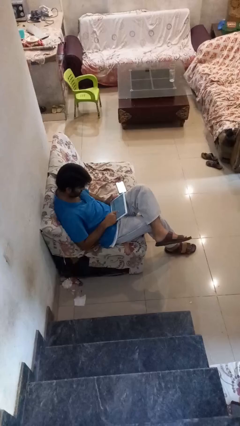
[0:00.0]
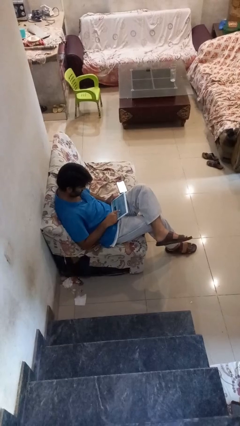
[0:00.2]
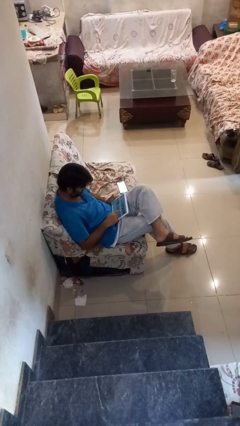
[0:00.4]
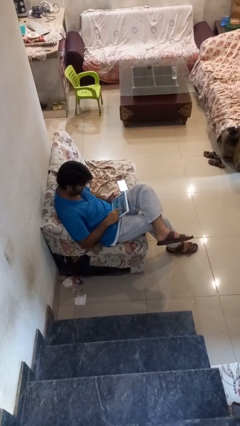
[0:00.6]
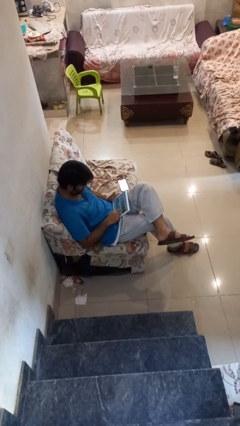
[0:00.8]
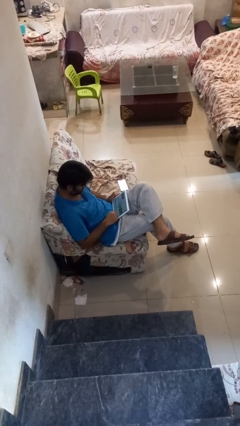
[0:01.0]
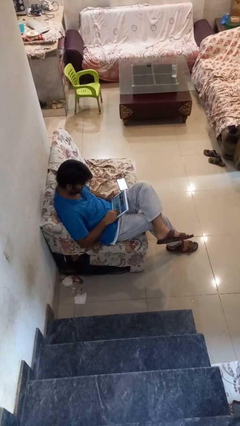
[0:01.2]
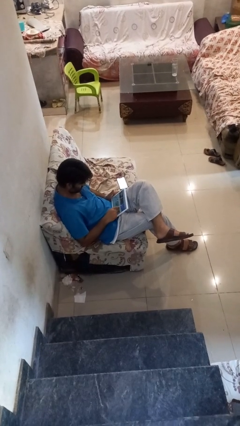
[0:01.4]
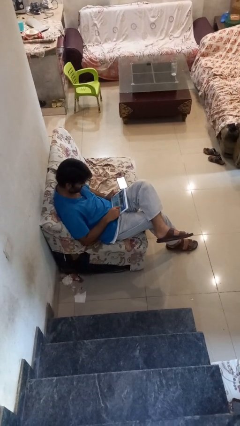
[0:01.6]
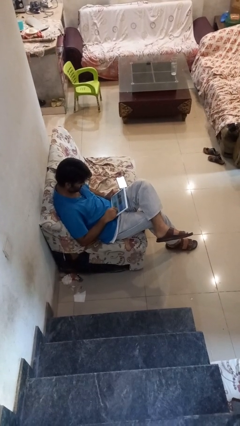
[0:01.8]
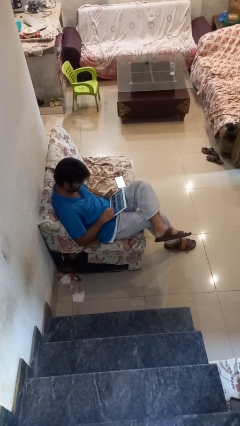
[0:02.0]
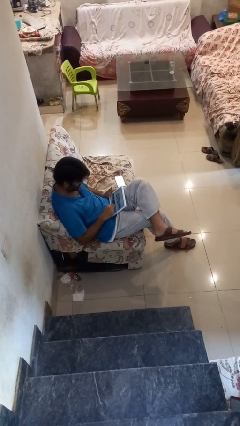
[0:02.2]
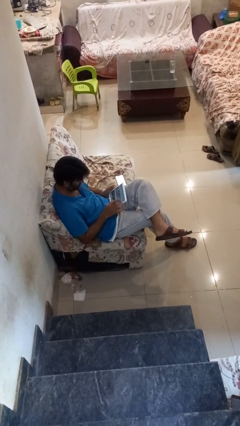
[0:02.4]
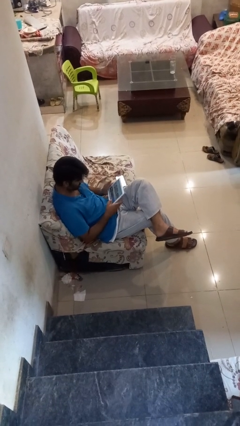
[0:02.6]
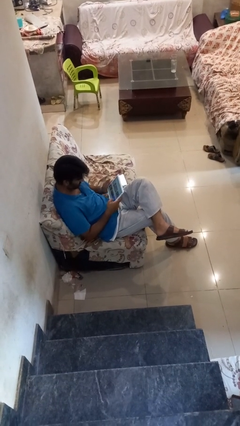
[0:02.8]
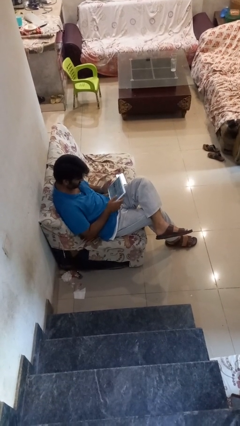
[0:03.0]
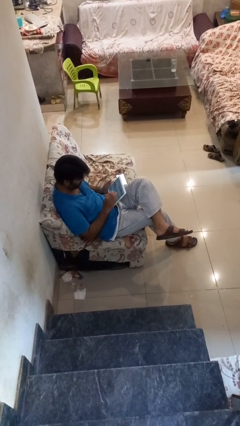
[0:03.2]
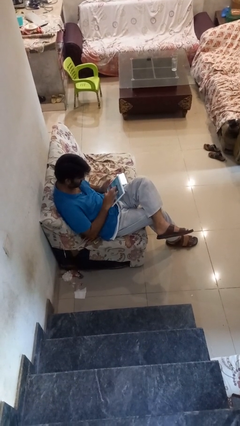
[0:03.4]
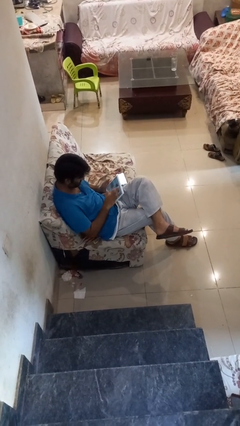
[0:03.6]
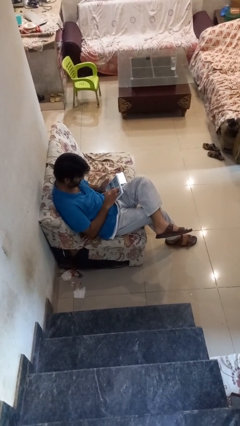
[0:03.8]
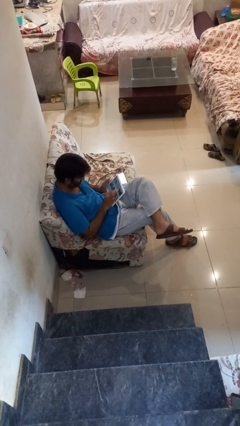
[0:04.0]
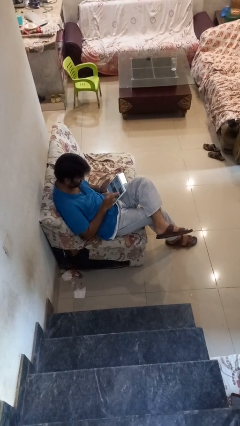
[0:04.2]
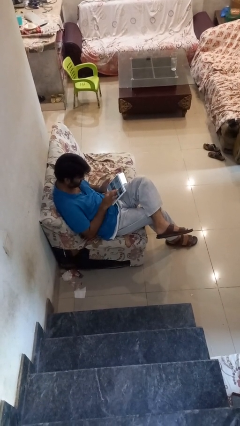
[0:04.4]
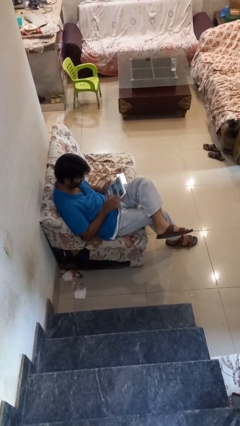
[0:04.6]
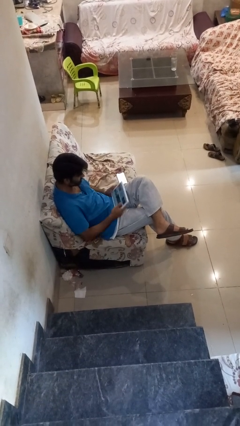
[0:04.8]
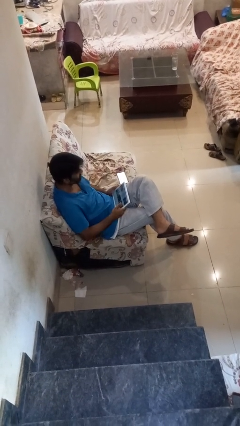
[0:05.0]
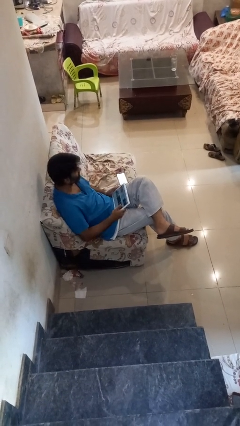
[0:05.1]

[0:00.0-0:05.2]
person interacts with tablet

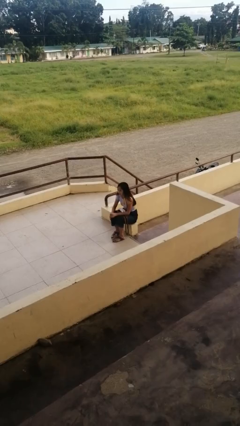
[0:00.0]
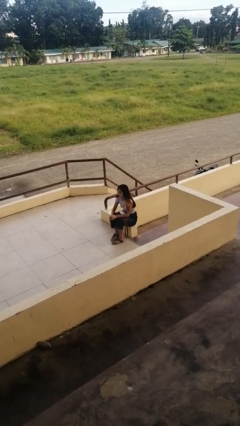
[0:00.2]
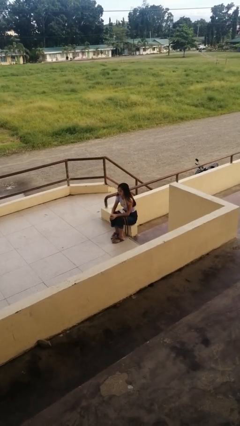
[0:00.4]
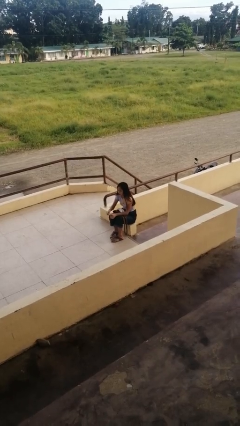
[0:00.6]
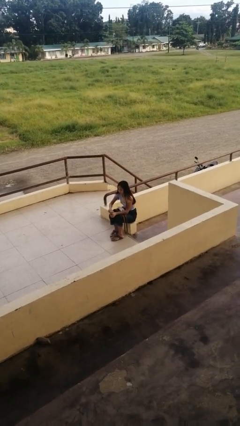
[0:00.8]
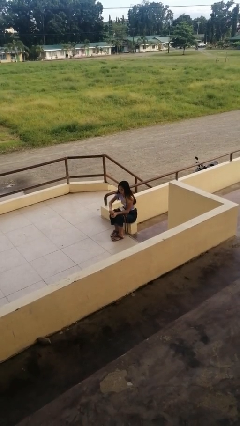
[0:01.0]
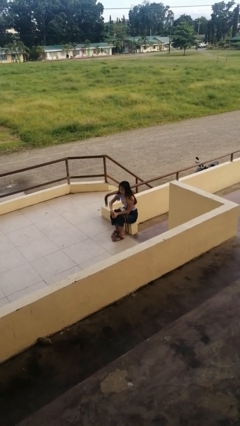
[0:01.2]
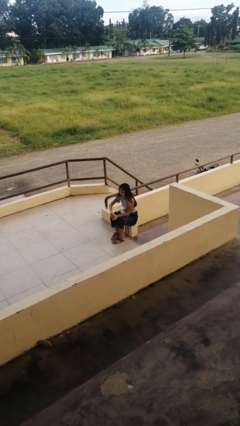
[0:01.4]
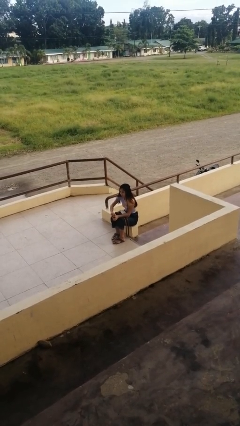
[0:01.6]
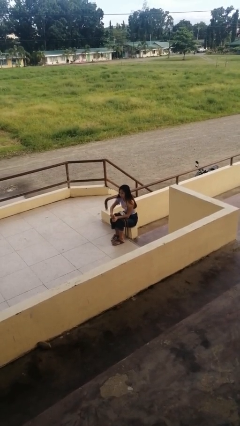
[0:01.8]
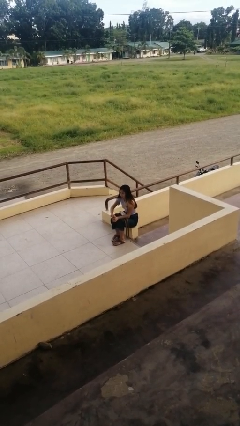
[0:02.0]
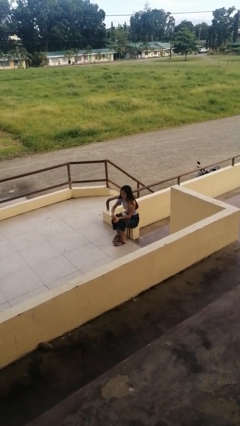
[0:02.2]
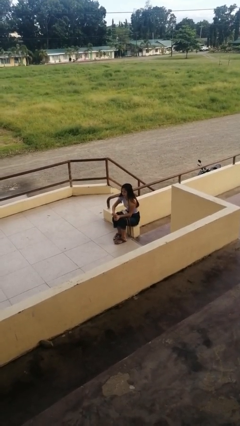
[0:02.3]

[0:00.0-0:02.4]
person opens beverage can

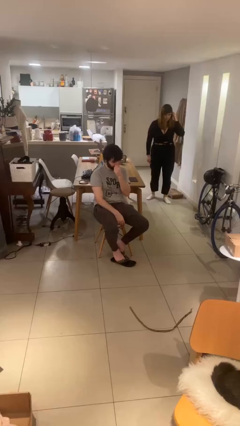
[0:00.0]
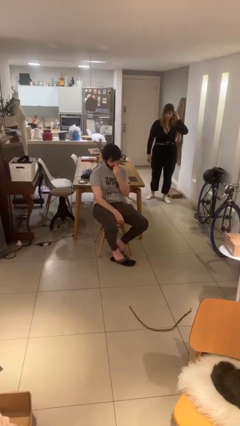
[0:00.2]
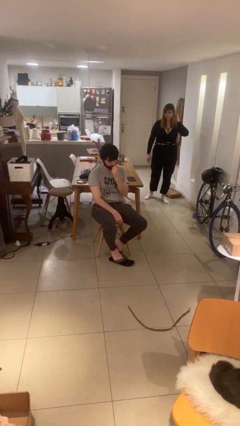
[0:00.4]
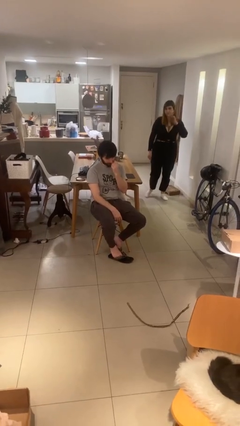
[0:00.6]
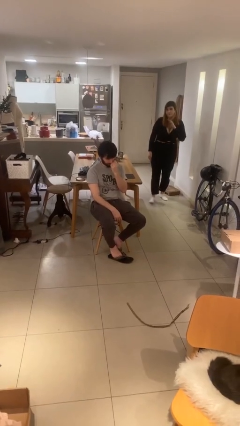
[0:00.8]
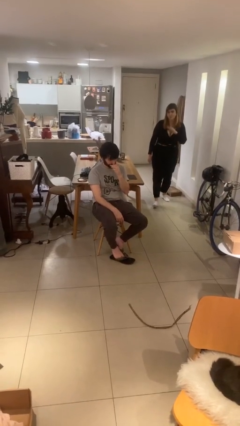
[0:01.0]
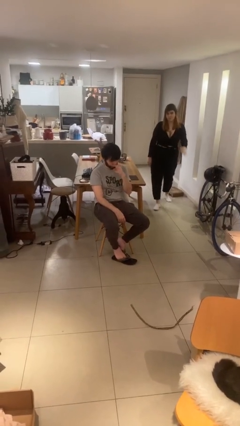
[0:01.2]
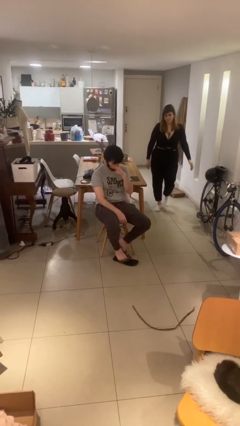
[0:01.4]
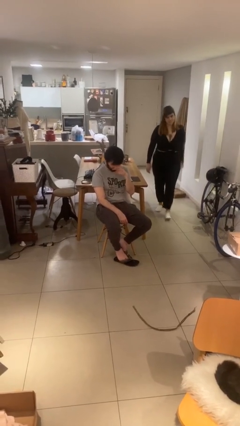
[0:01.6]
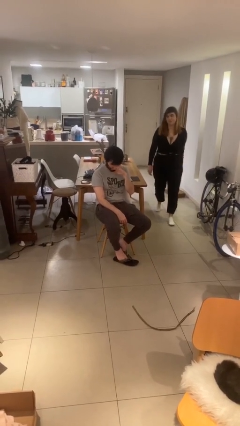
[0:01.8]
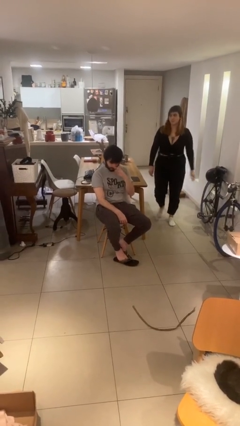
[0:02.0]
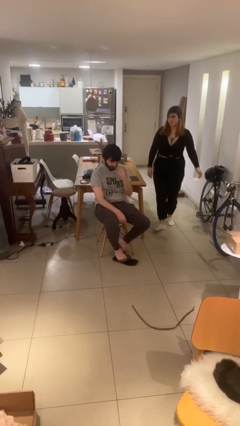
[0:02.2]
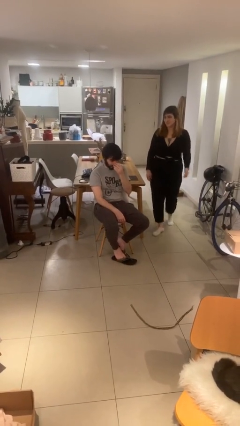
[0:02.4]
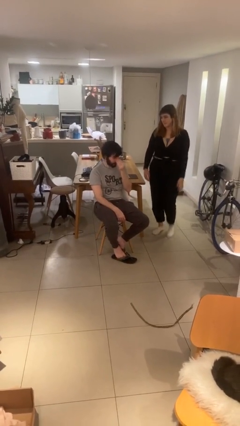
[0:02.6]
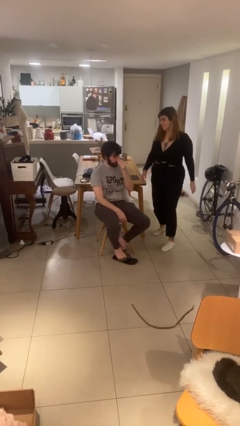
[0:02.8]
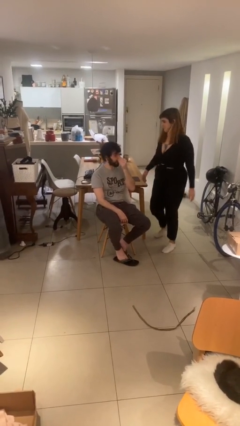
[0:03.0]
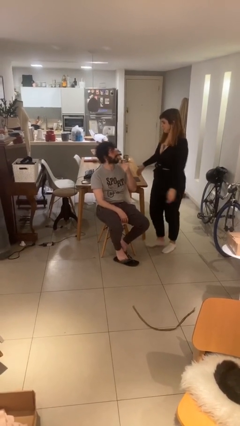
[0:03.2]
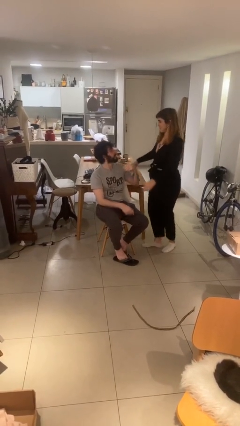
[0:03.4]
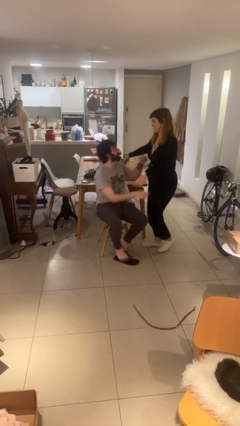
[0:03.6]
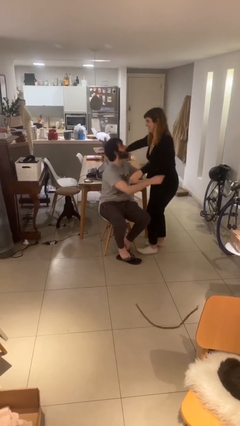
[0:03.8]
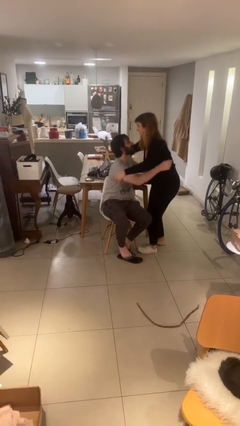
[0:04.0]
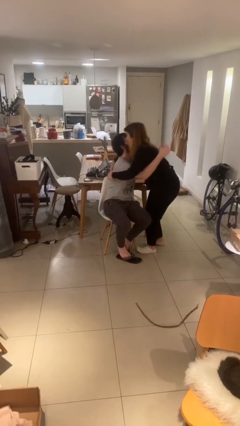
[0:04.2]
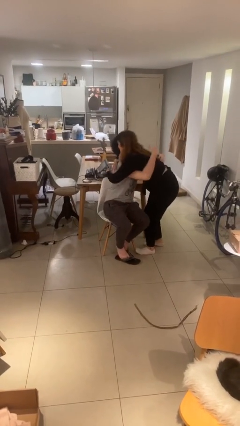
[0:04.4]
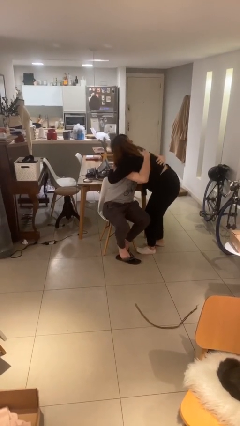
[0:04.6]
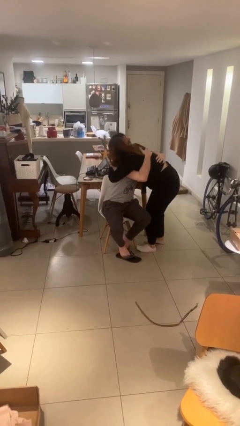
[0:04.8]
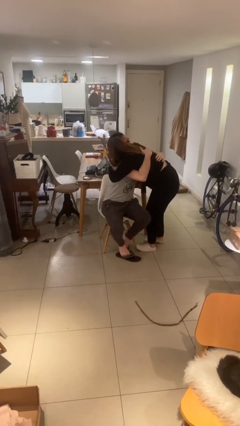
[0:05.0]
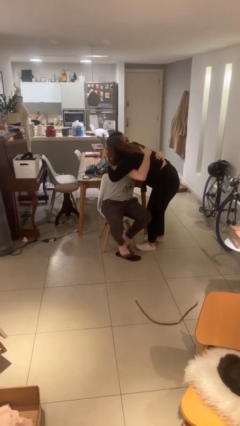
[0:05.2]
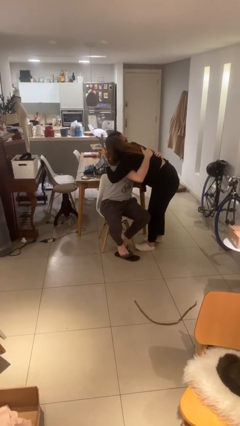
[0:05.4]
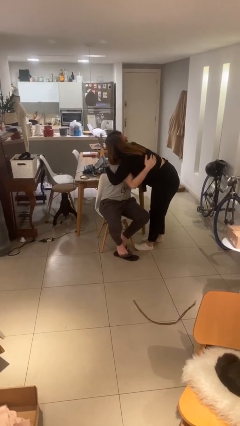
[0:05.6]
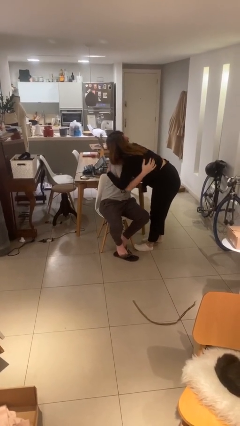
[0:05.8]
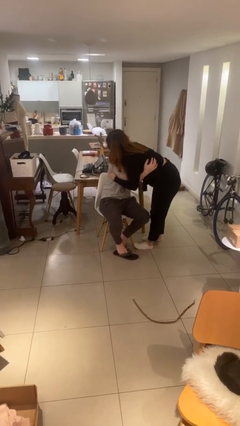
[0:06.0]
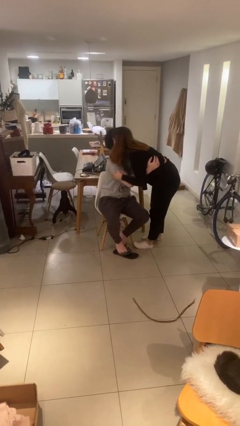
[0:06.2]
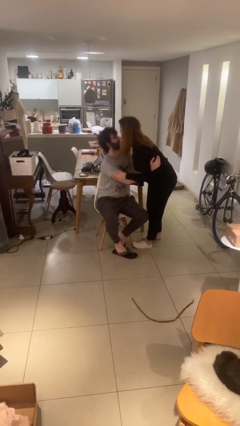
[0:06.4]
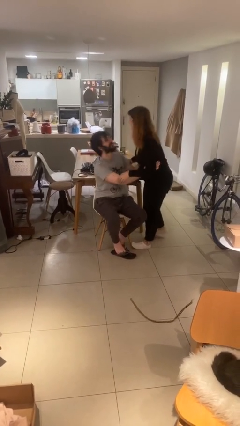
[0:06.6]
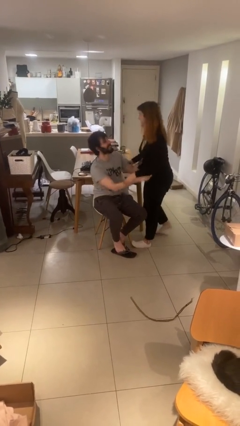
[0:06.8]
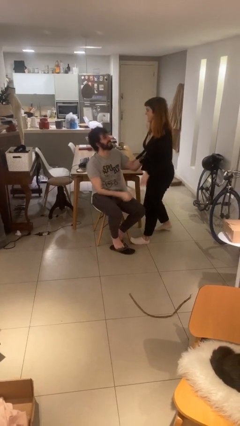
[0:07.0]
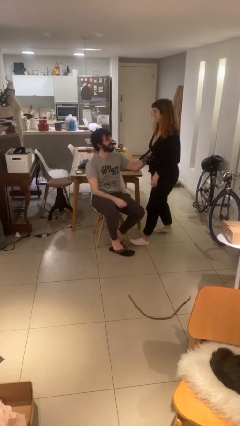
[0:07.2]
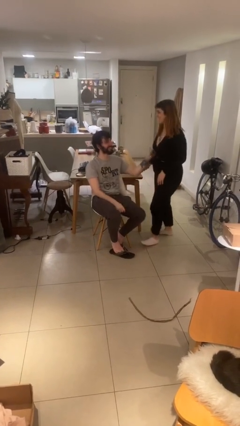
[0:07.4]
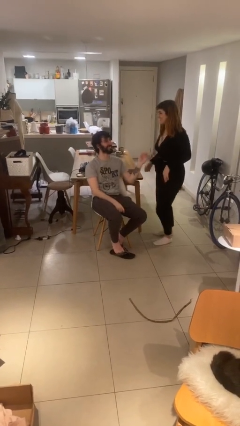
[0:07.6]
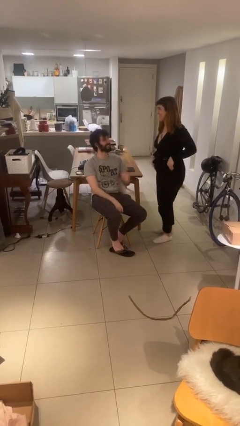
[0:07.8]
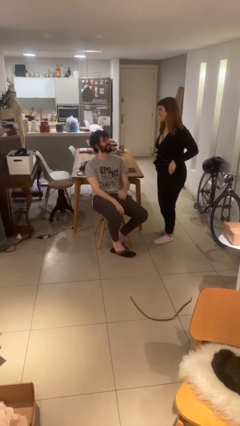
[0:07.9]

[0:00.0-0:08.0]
person embraces person

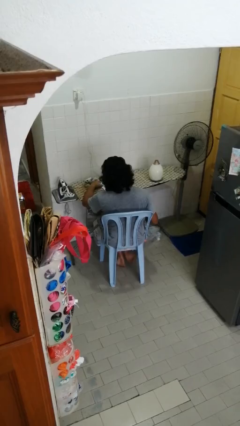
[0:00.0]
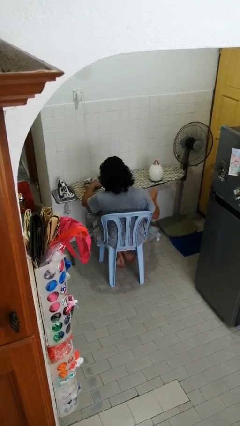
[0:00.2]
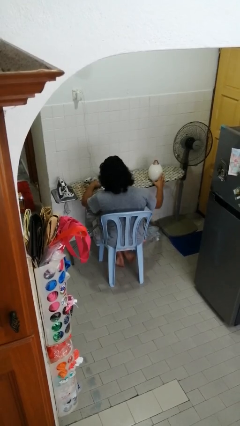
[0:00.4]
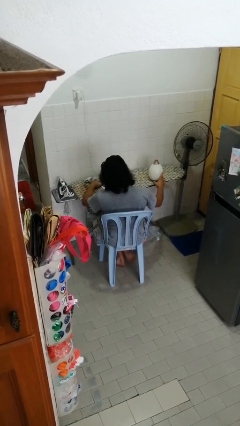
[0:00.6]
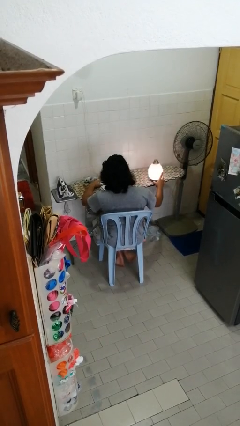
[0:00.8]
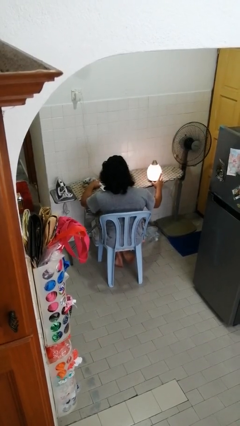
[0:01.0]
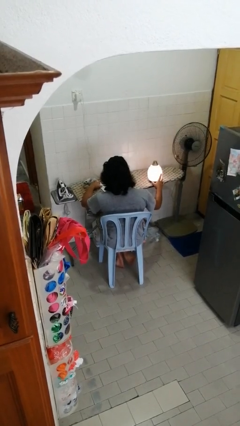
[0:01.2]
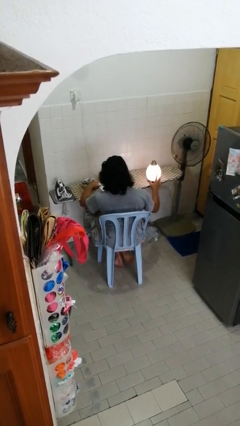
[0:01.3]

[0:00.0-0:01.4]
person turns on lamp

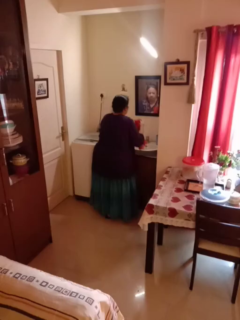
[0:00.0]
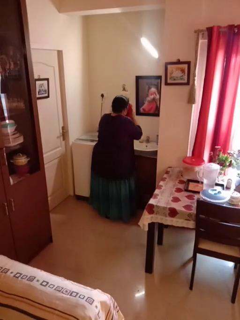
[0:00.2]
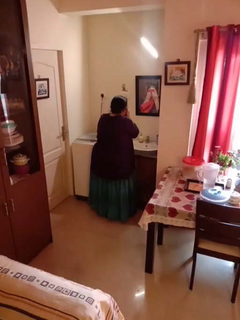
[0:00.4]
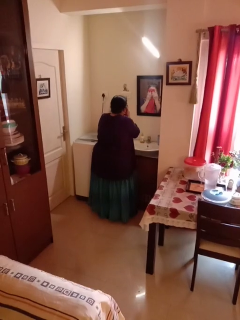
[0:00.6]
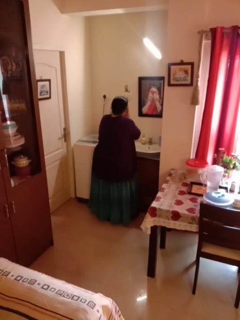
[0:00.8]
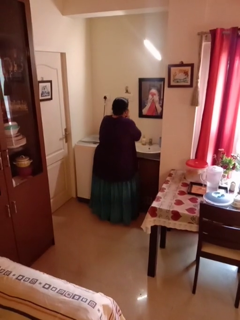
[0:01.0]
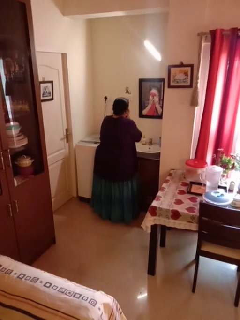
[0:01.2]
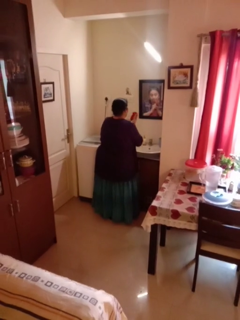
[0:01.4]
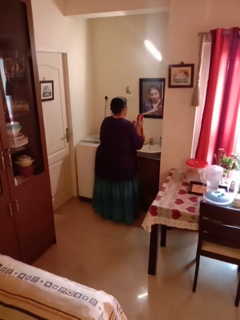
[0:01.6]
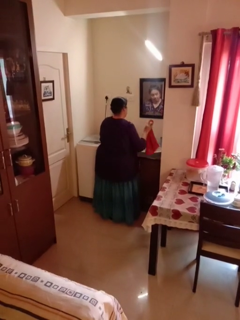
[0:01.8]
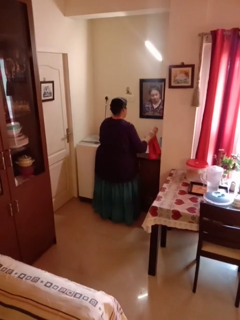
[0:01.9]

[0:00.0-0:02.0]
person dries face with towel
